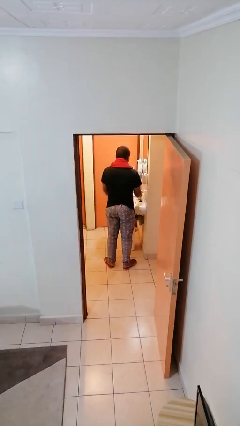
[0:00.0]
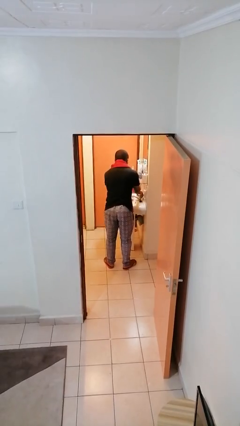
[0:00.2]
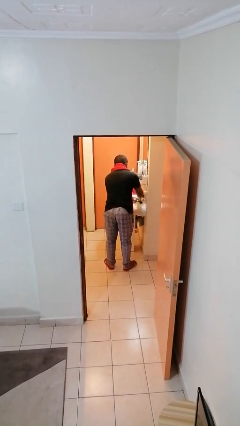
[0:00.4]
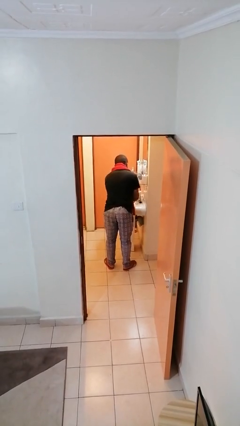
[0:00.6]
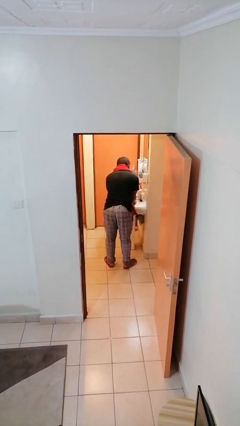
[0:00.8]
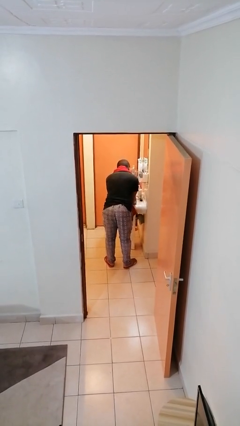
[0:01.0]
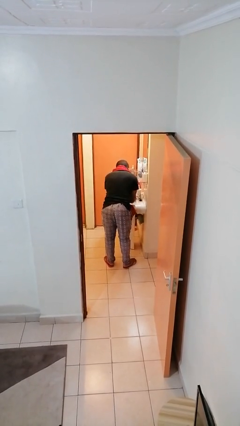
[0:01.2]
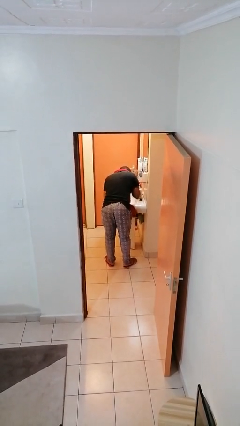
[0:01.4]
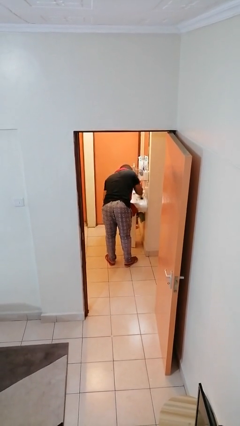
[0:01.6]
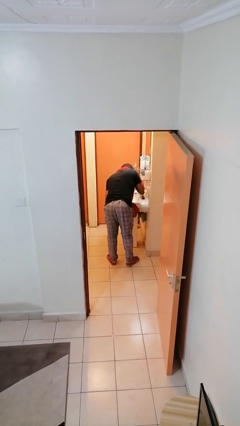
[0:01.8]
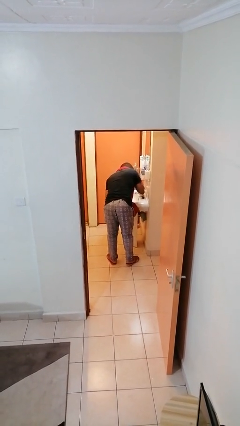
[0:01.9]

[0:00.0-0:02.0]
person washes face

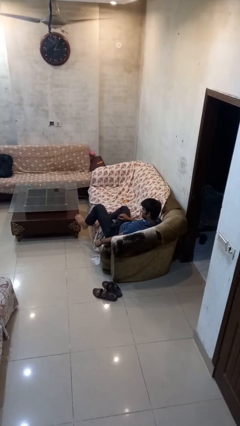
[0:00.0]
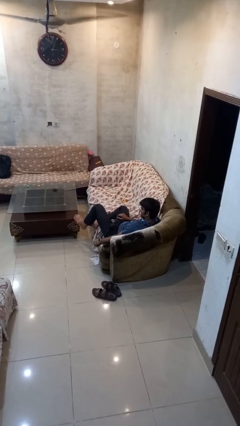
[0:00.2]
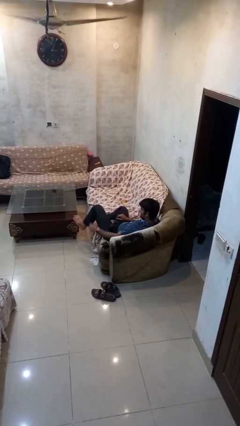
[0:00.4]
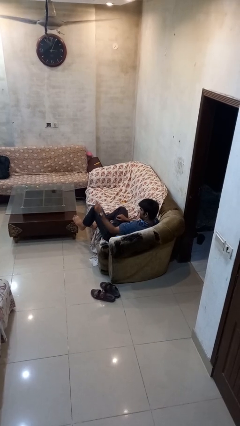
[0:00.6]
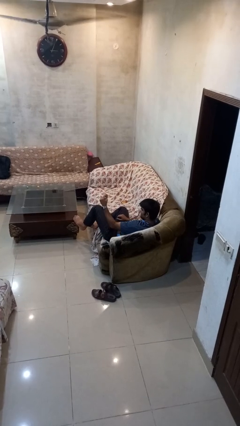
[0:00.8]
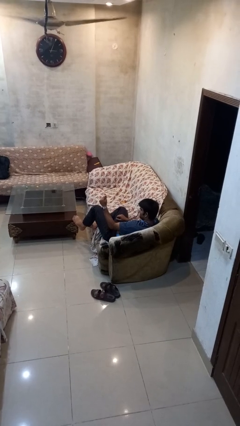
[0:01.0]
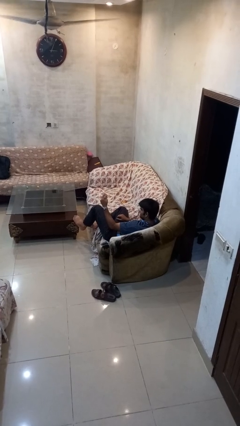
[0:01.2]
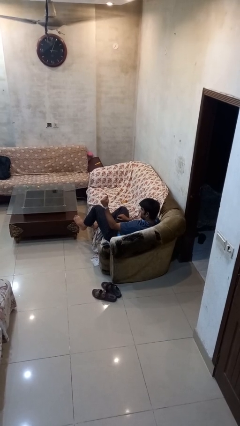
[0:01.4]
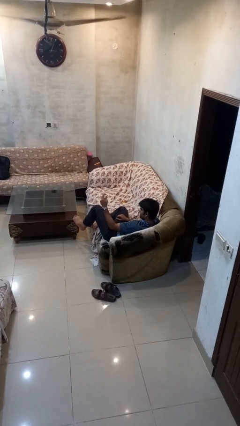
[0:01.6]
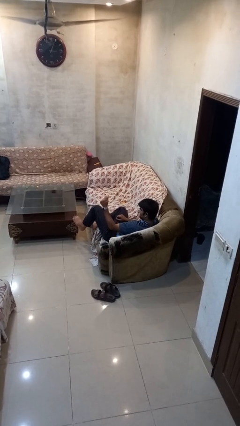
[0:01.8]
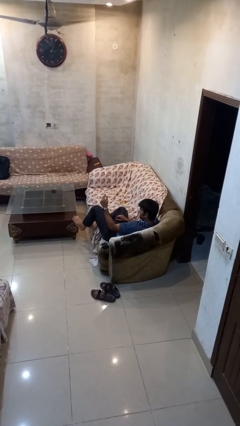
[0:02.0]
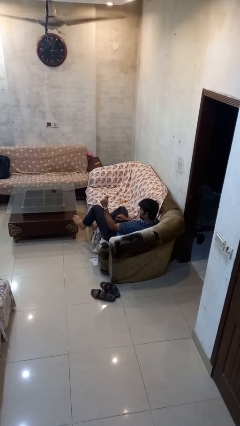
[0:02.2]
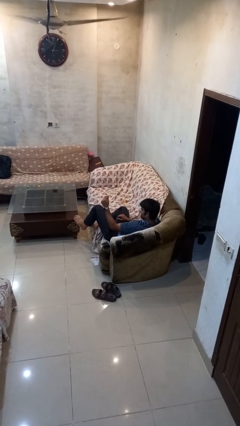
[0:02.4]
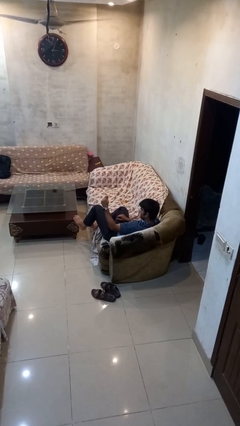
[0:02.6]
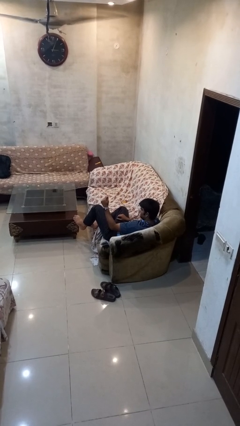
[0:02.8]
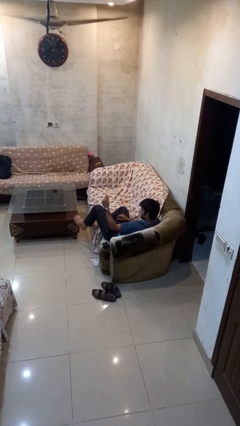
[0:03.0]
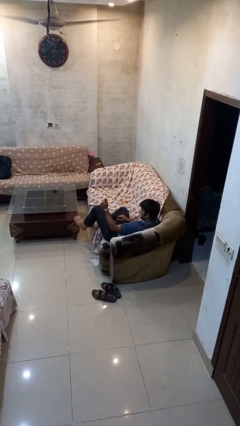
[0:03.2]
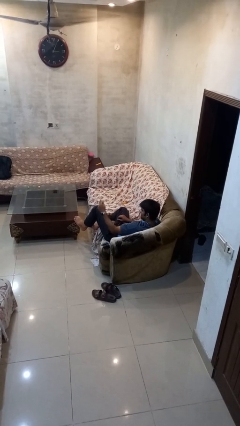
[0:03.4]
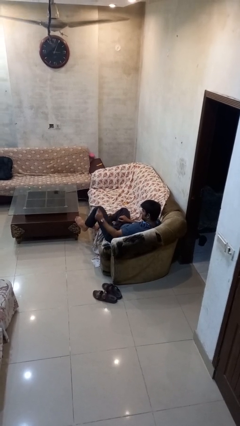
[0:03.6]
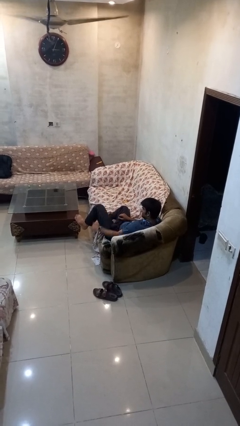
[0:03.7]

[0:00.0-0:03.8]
person snaps fingers

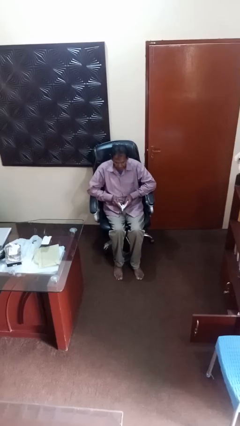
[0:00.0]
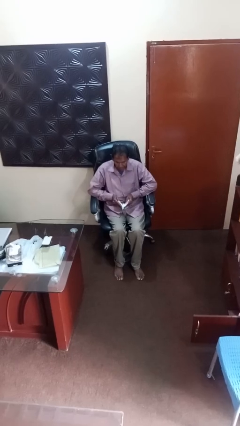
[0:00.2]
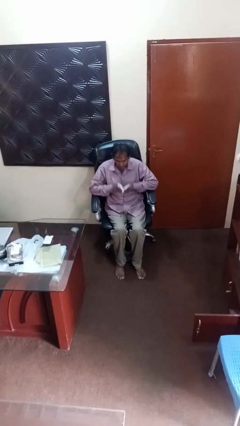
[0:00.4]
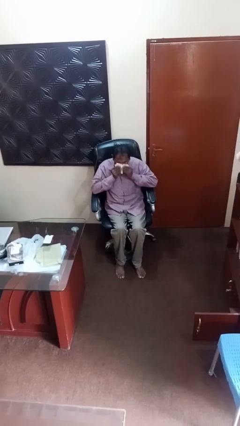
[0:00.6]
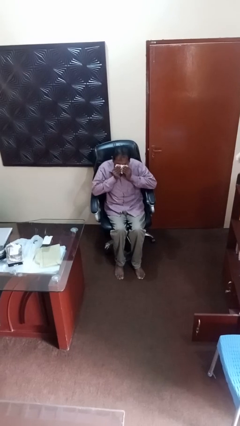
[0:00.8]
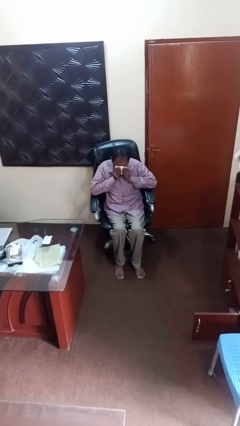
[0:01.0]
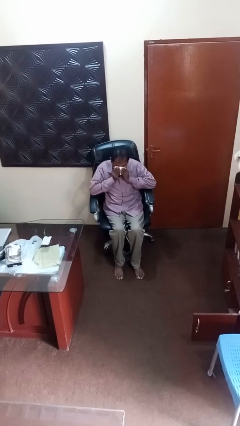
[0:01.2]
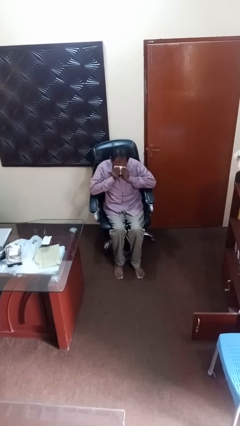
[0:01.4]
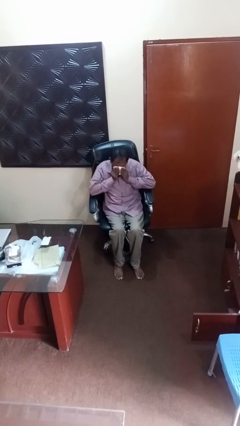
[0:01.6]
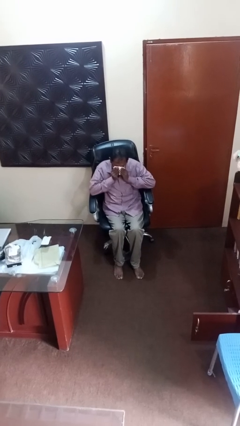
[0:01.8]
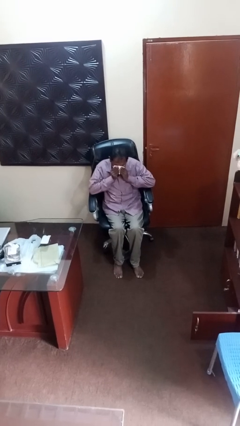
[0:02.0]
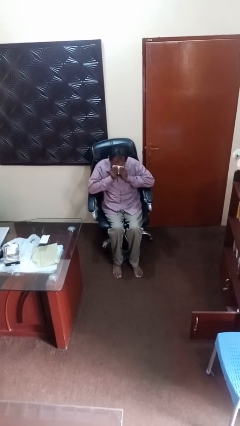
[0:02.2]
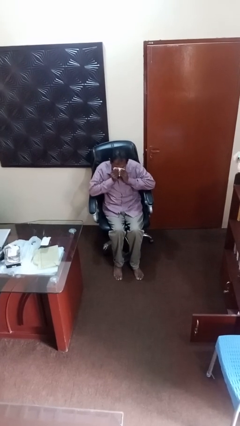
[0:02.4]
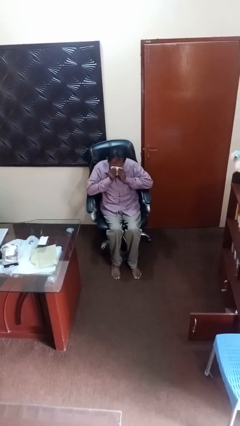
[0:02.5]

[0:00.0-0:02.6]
person blows nose

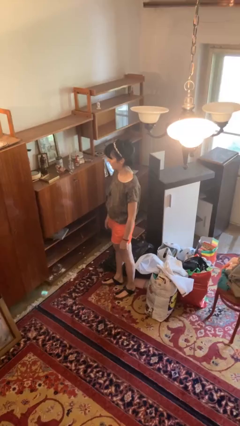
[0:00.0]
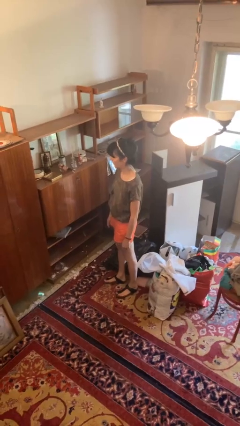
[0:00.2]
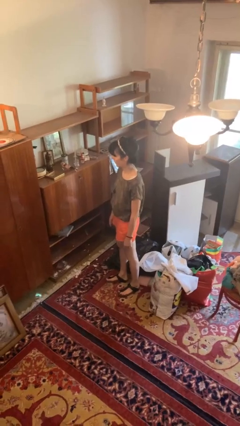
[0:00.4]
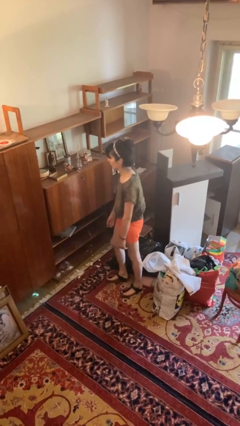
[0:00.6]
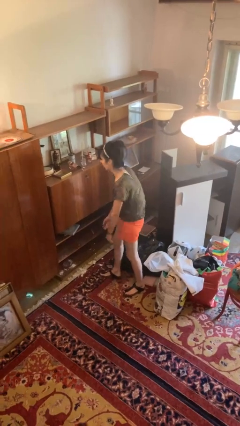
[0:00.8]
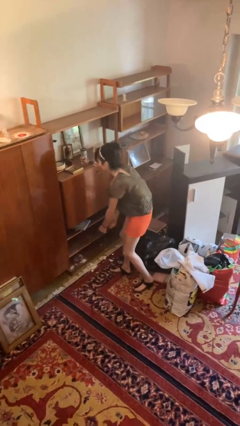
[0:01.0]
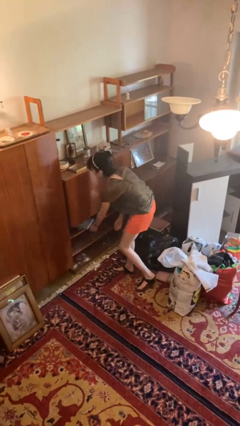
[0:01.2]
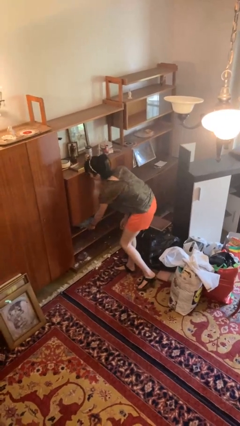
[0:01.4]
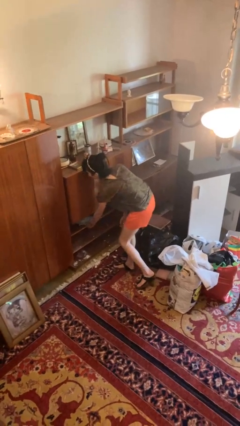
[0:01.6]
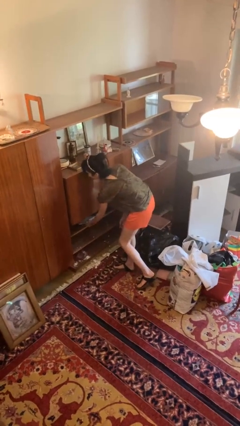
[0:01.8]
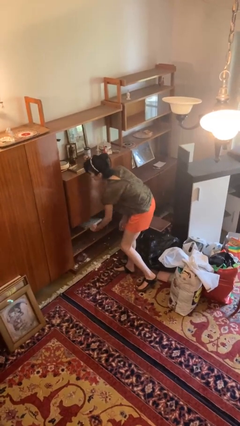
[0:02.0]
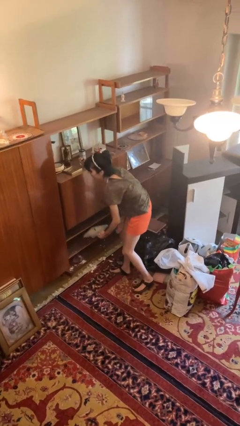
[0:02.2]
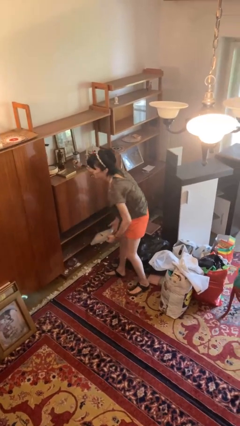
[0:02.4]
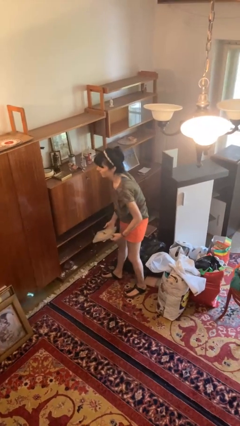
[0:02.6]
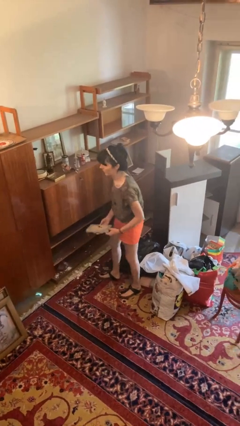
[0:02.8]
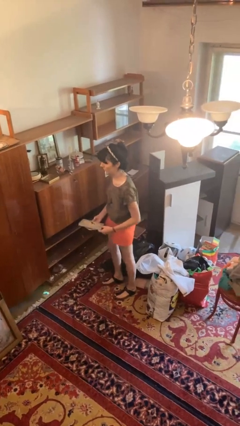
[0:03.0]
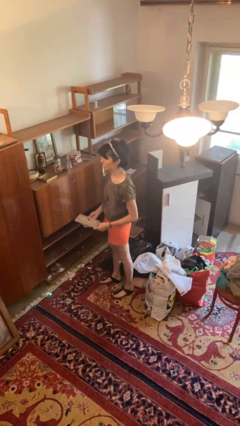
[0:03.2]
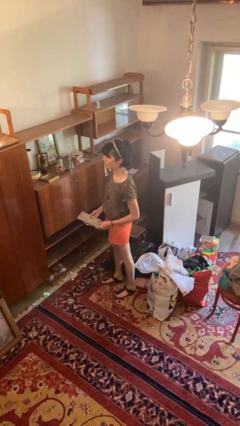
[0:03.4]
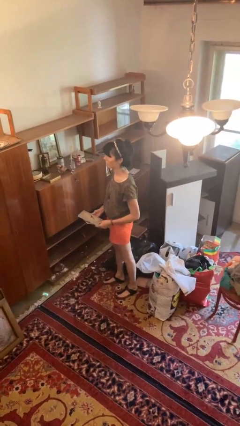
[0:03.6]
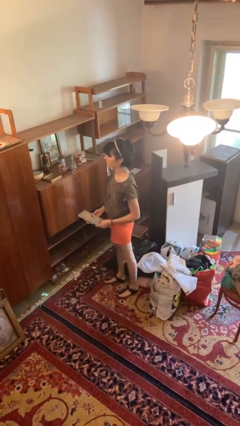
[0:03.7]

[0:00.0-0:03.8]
person picks up object from cabinet

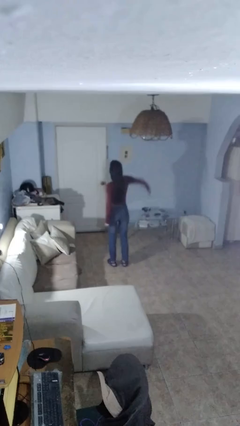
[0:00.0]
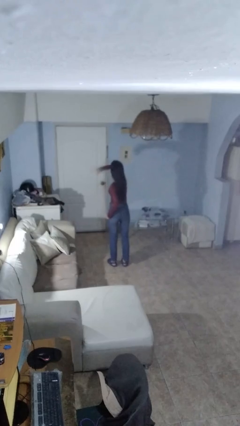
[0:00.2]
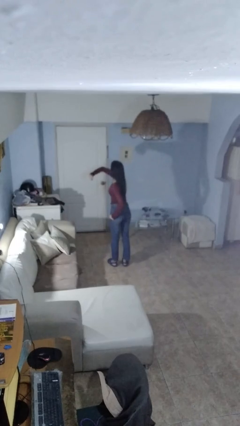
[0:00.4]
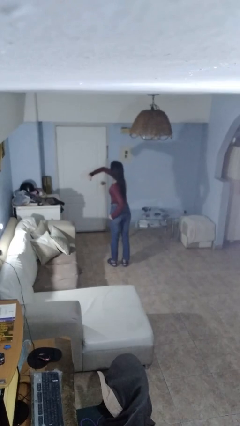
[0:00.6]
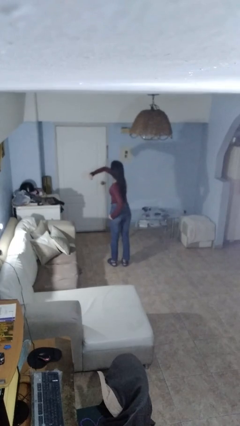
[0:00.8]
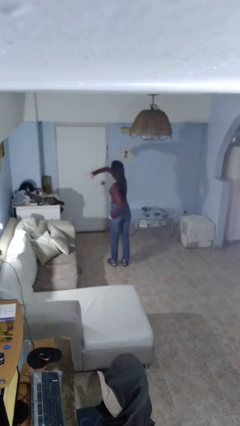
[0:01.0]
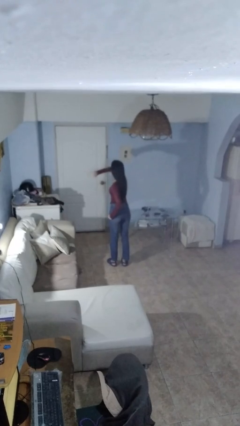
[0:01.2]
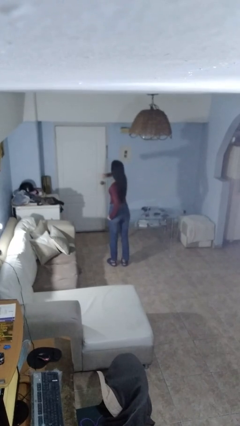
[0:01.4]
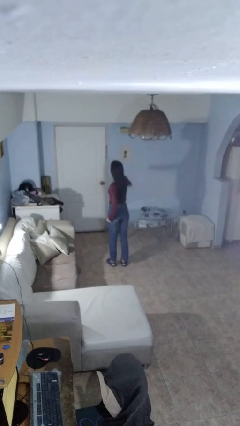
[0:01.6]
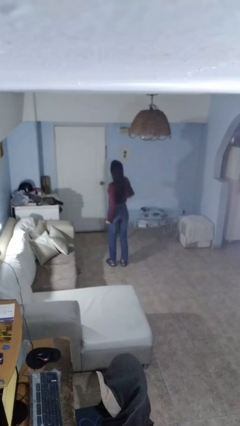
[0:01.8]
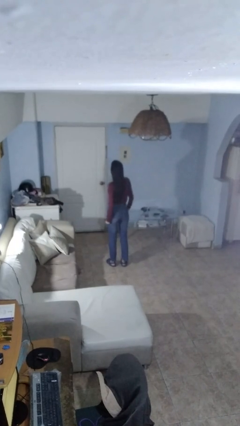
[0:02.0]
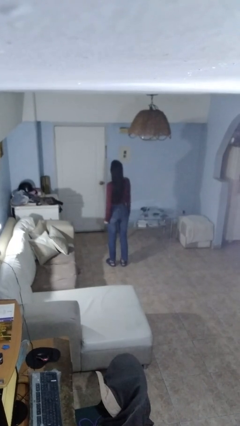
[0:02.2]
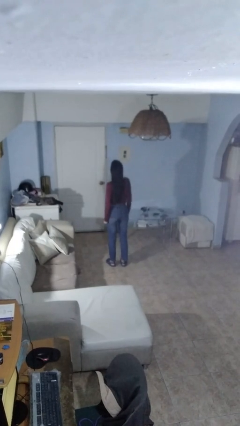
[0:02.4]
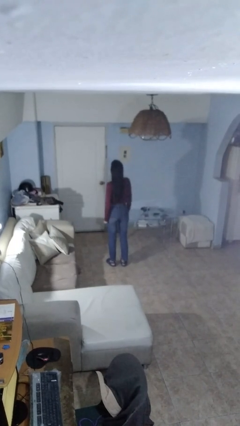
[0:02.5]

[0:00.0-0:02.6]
person punches

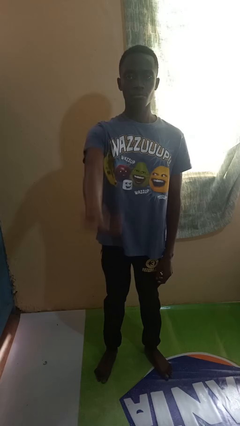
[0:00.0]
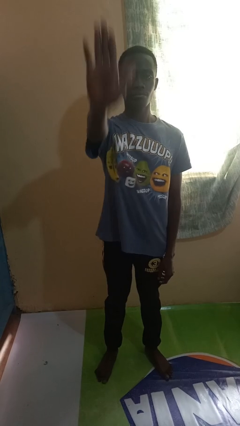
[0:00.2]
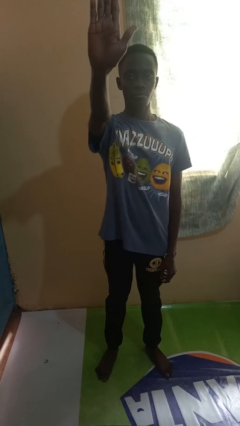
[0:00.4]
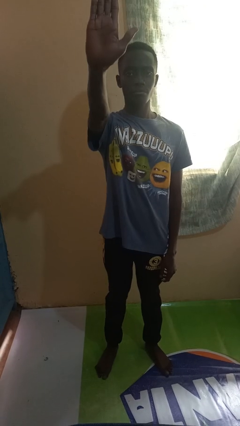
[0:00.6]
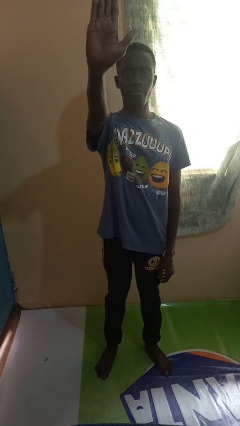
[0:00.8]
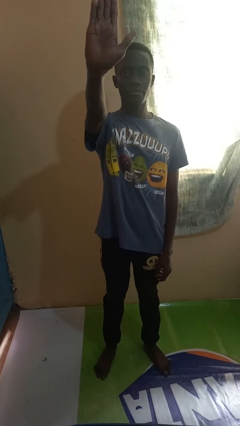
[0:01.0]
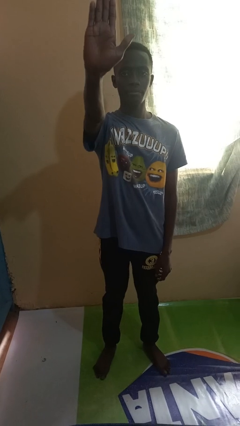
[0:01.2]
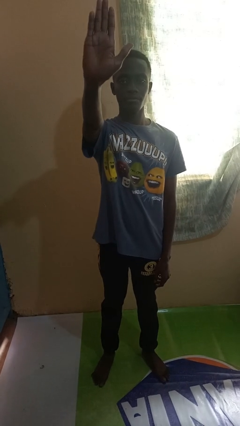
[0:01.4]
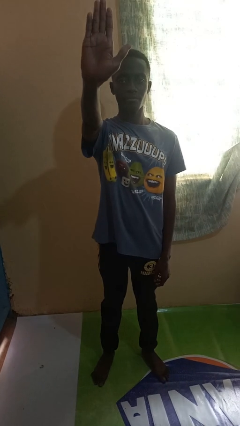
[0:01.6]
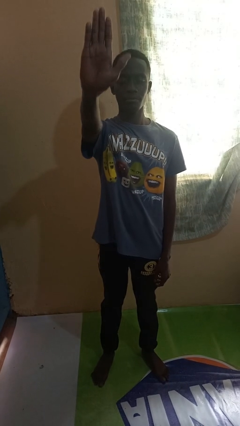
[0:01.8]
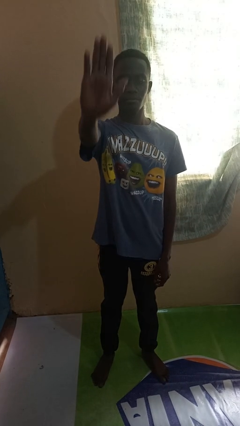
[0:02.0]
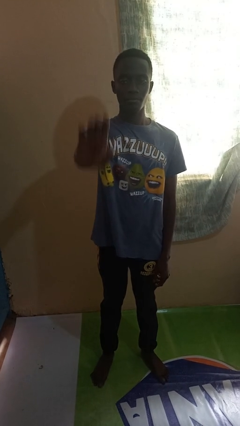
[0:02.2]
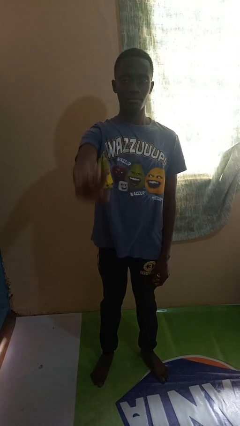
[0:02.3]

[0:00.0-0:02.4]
person gestures stop

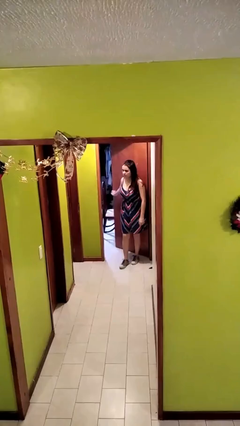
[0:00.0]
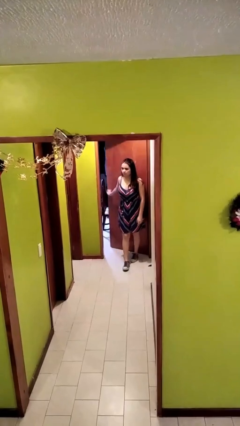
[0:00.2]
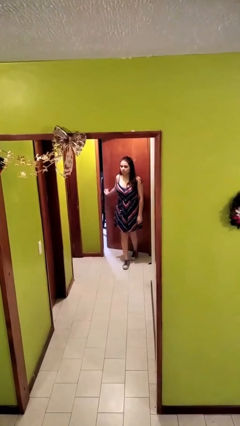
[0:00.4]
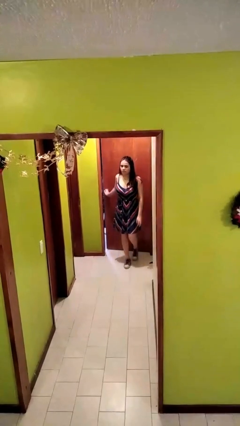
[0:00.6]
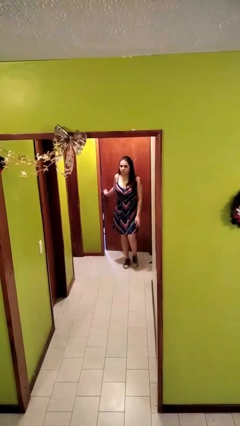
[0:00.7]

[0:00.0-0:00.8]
person closes facility door
